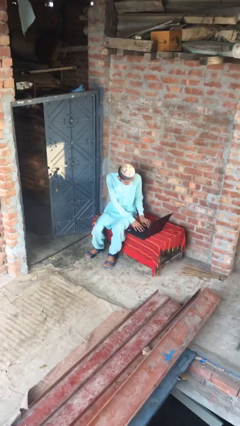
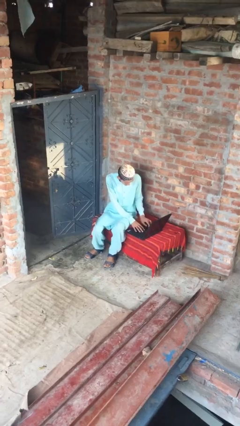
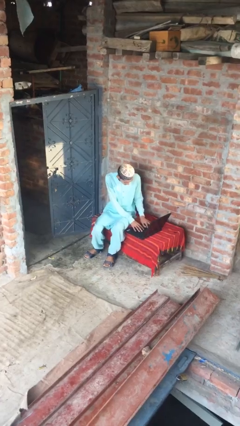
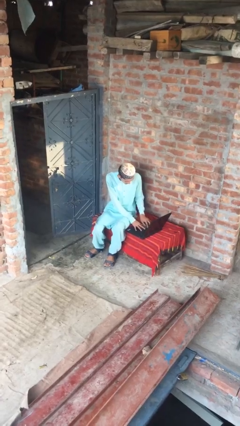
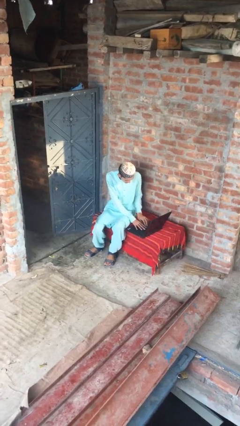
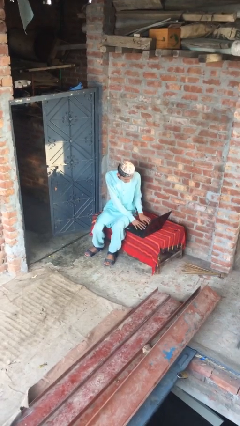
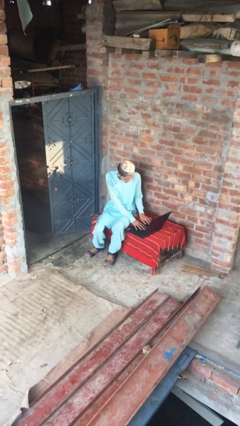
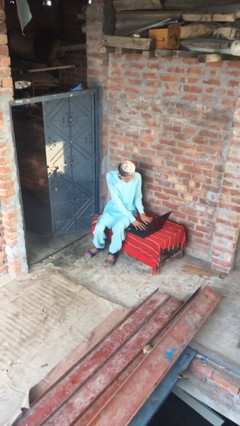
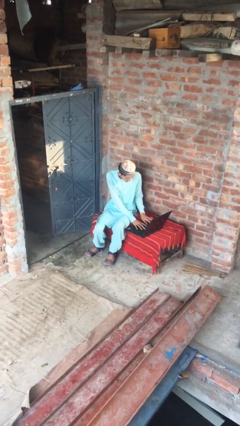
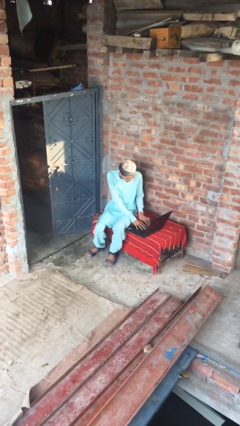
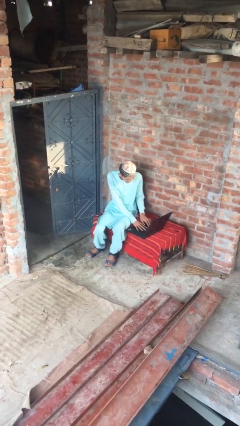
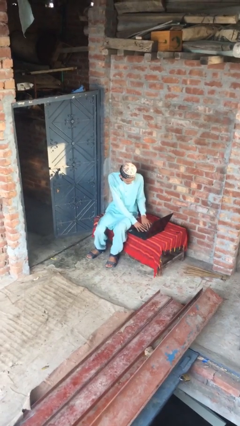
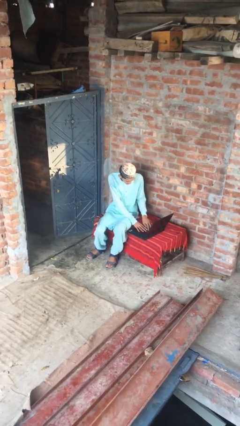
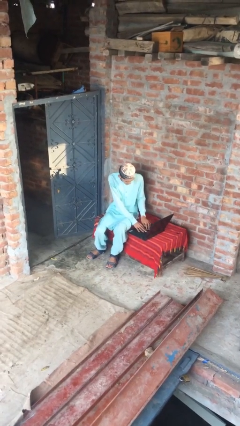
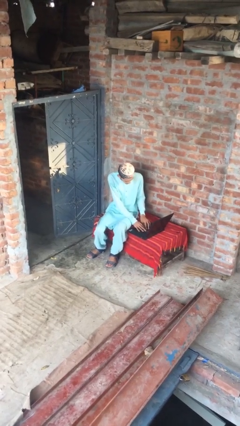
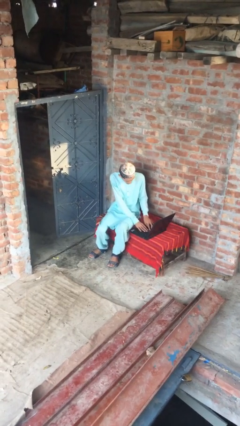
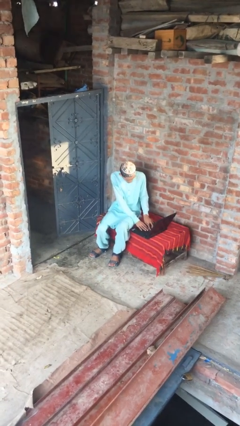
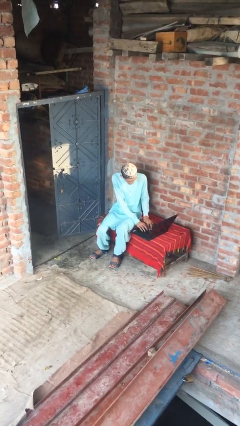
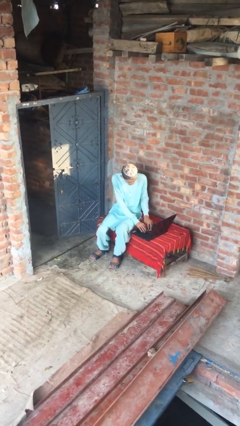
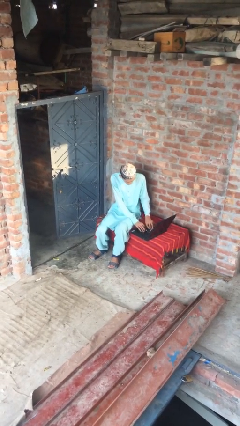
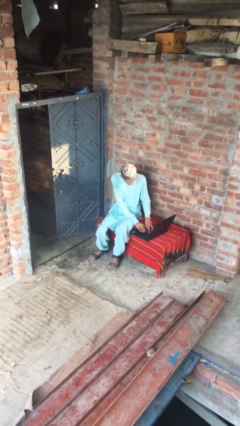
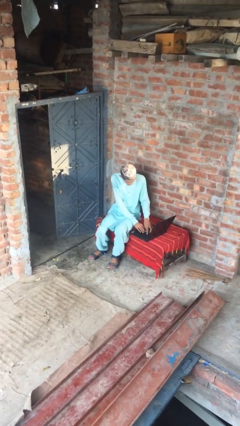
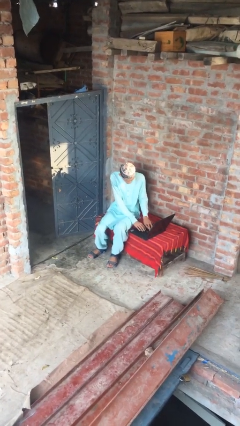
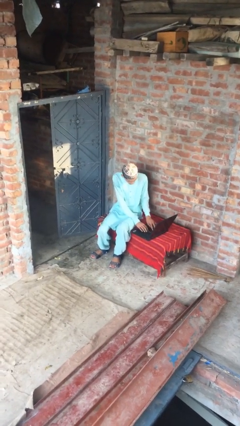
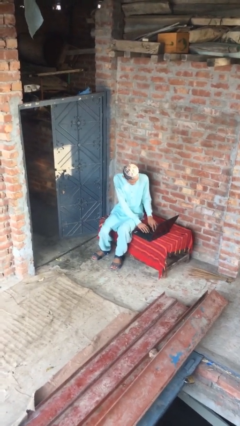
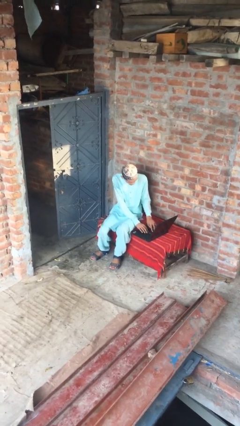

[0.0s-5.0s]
person interacts with laptop

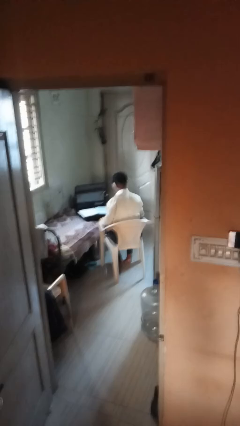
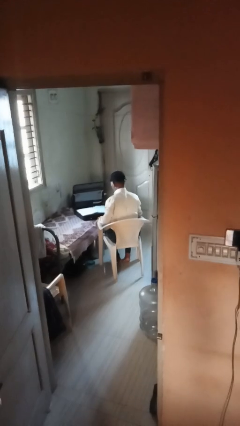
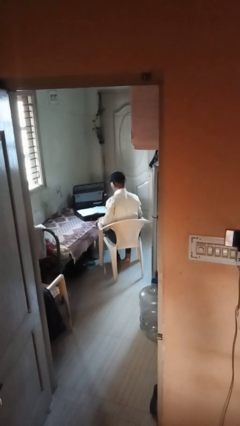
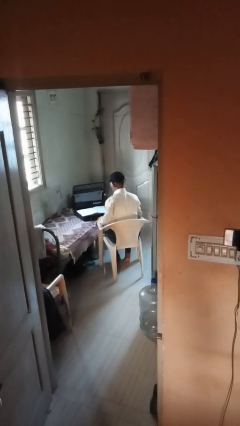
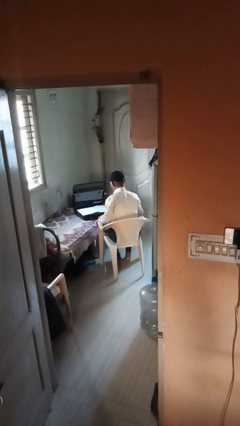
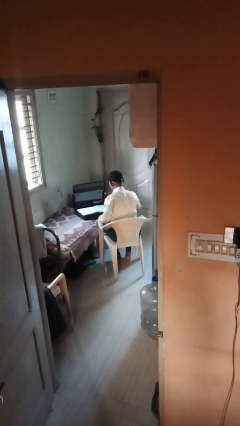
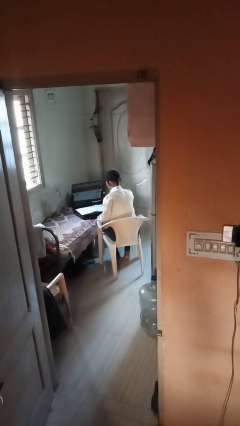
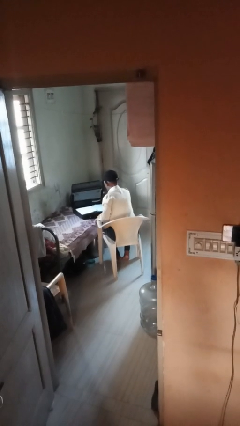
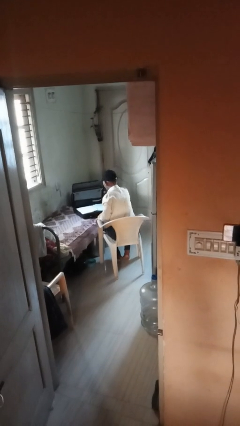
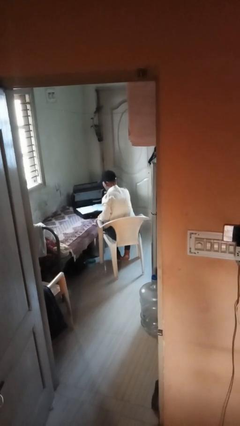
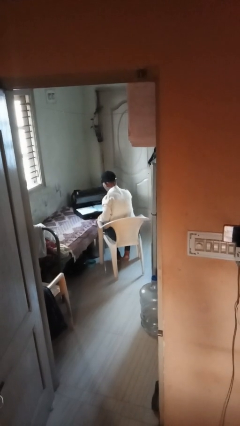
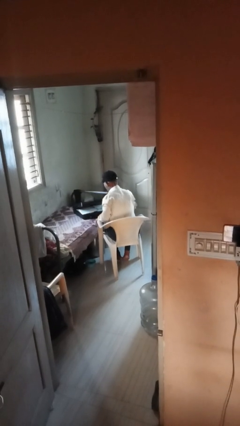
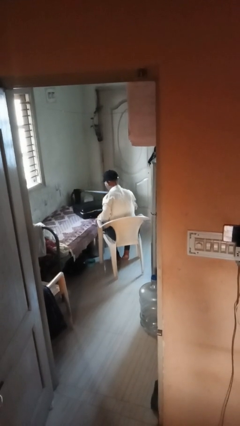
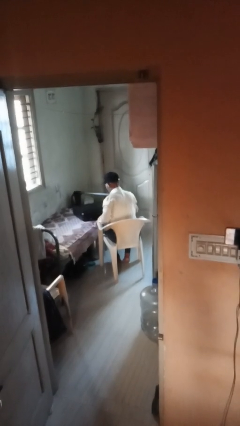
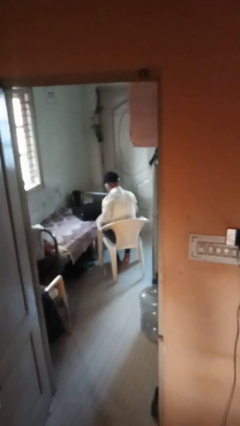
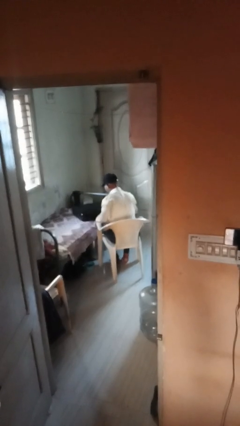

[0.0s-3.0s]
person closes suitcase

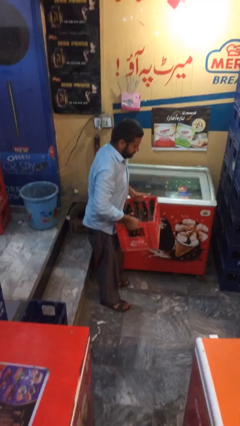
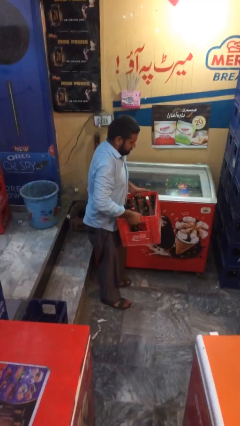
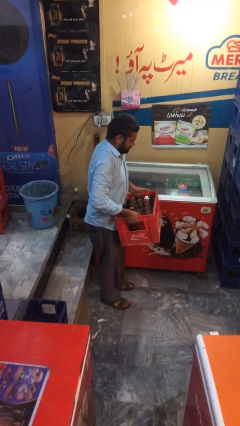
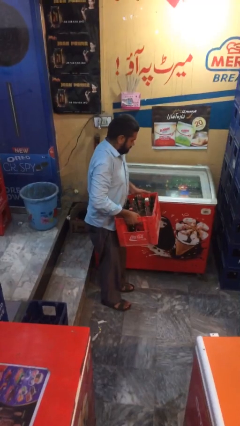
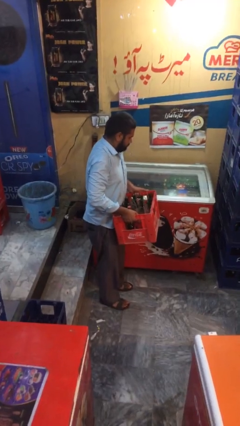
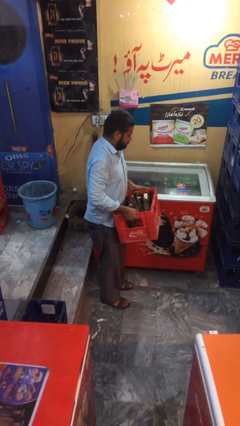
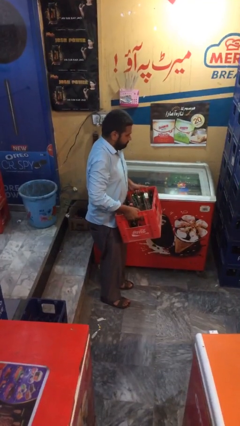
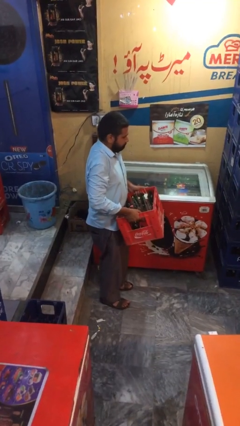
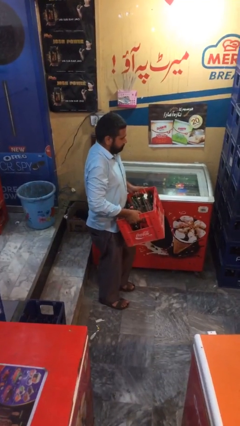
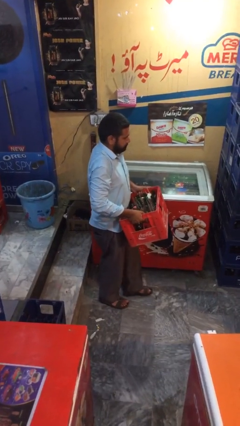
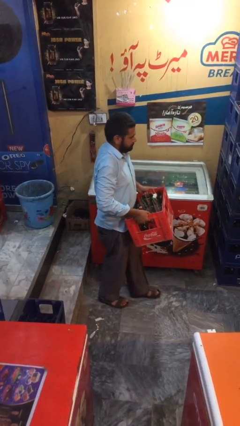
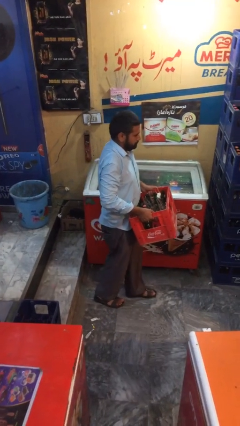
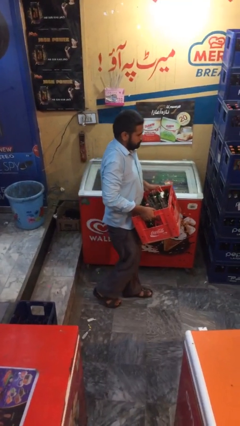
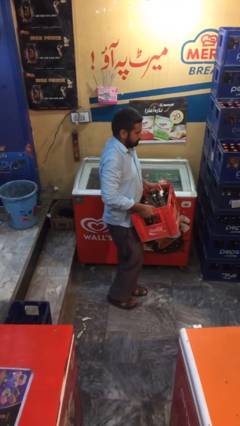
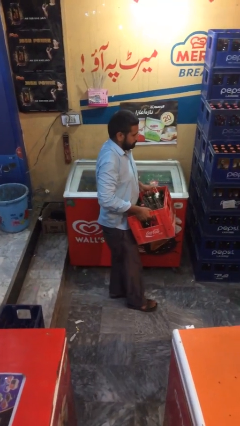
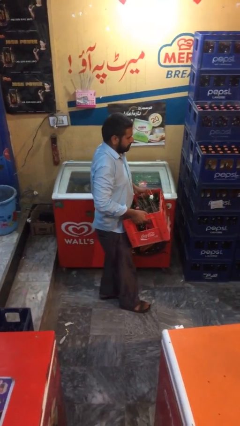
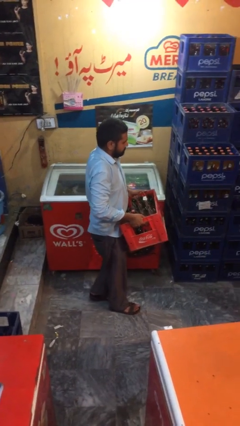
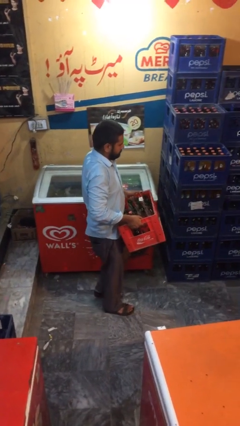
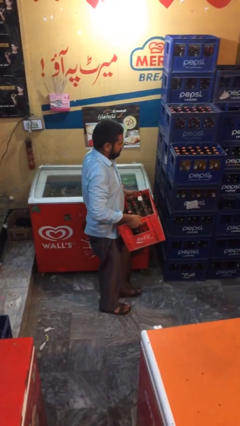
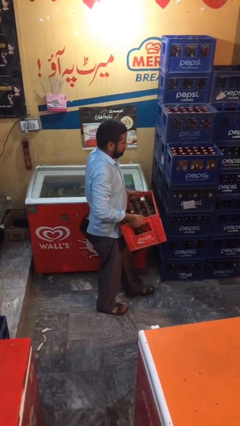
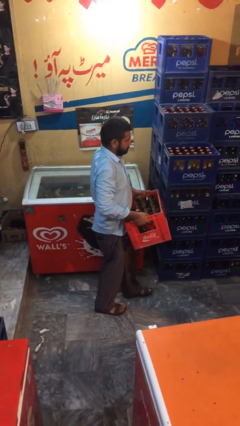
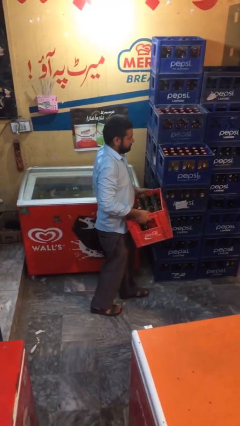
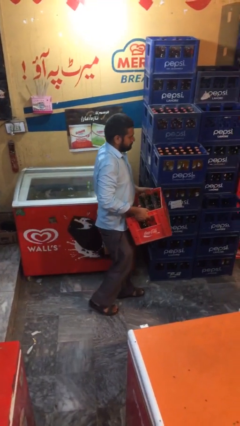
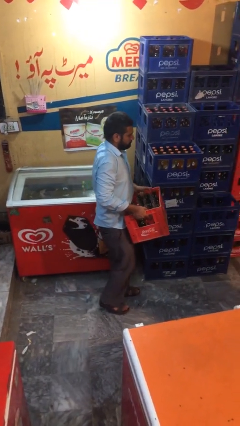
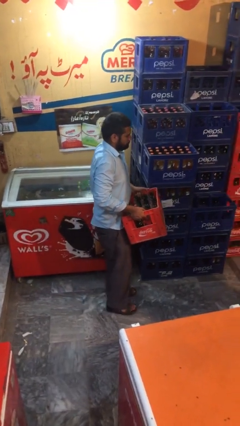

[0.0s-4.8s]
person carries heavy object

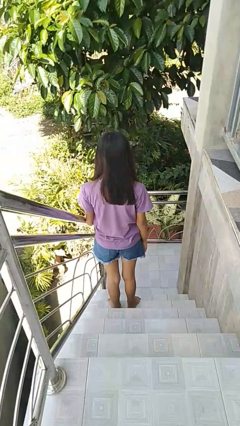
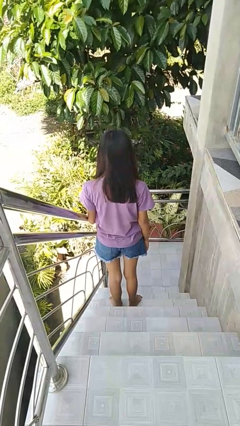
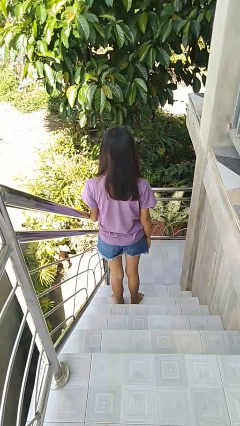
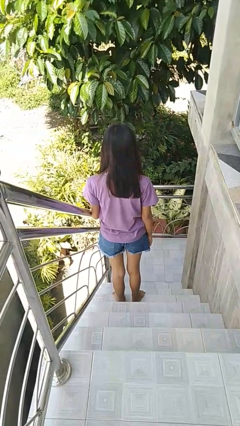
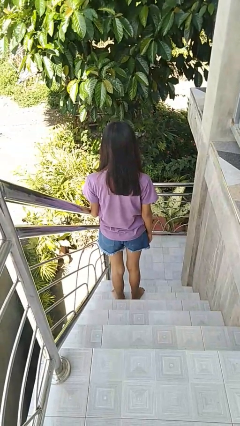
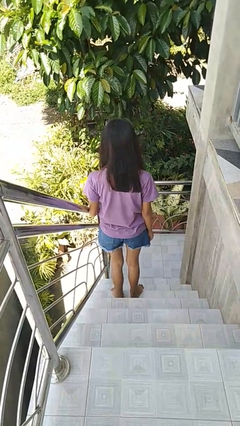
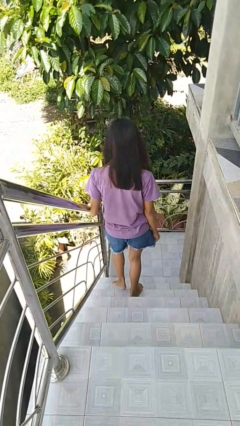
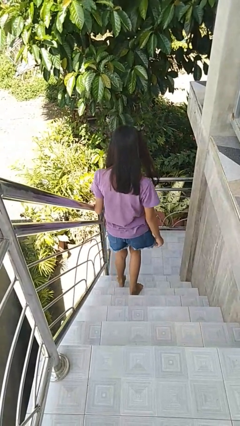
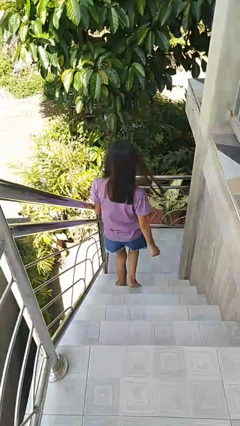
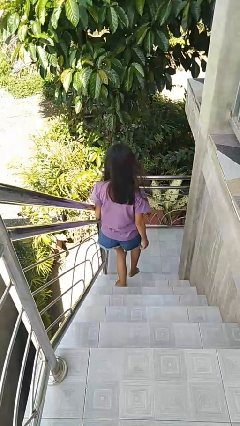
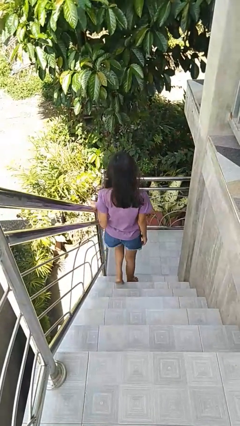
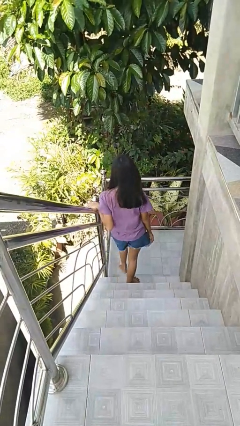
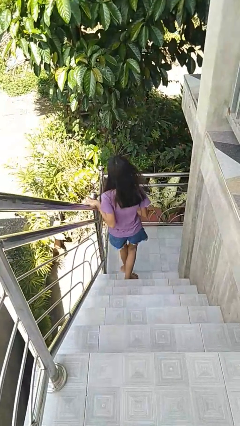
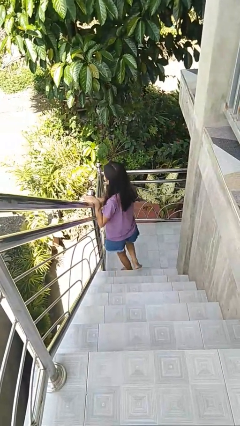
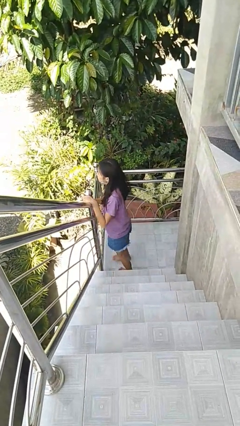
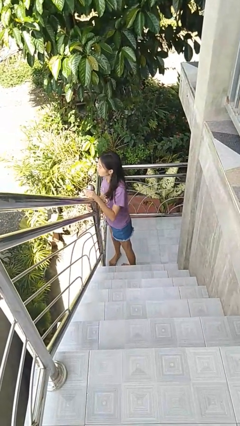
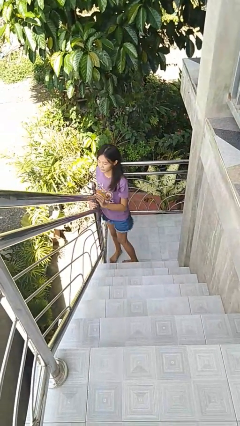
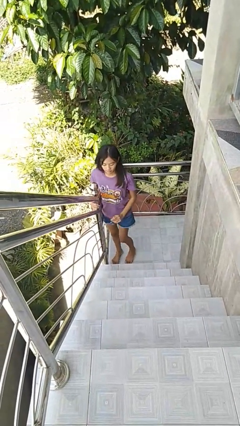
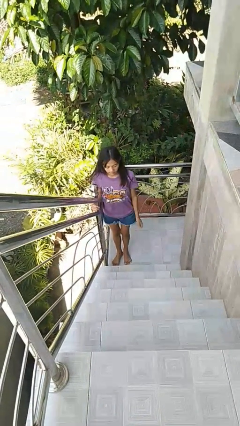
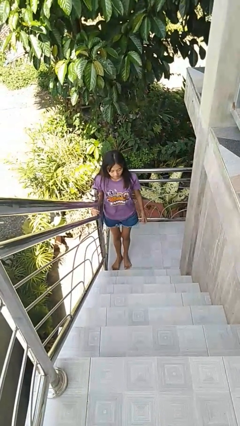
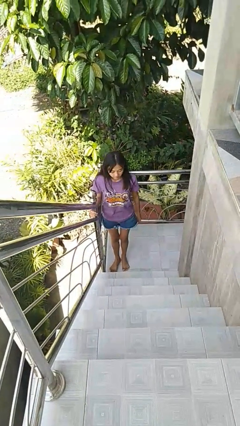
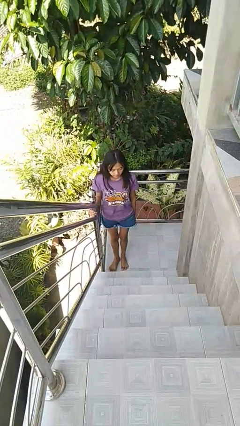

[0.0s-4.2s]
person climbs down stairs

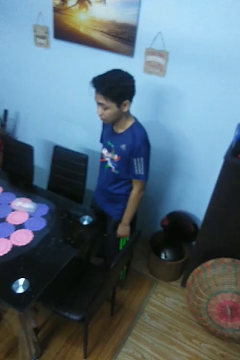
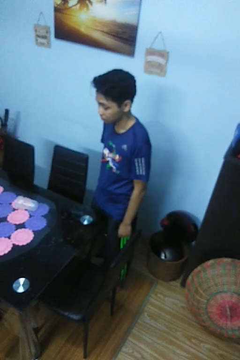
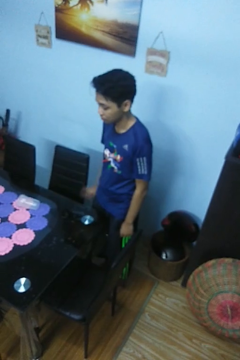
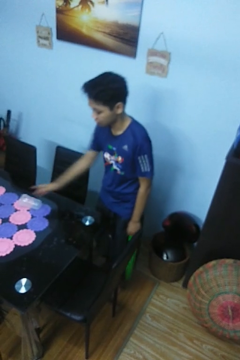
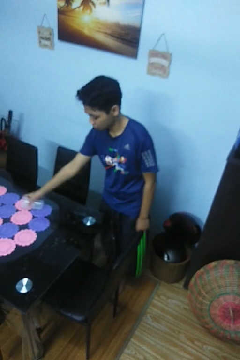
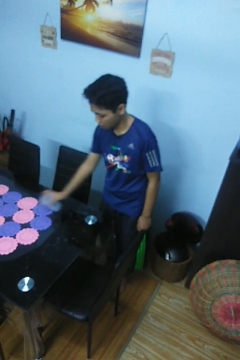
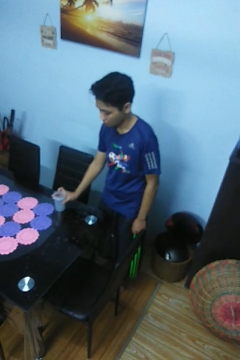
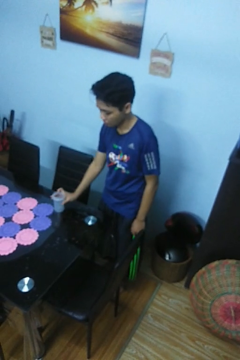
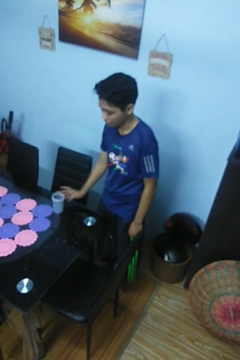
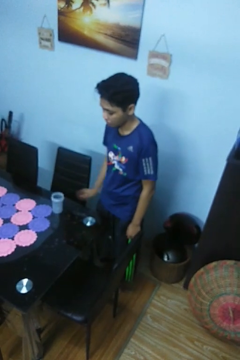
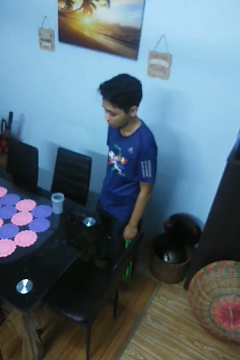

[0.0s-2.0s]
person sets upright glass
